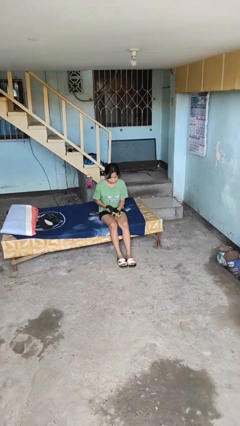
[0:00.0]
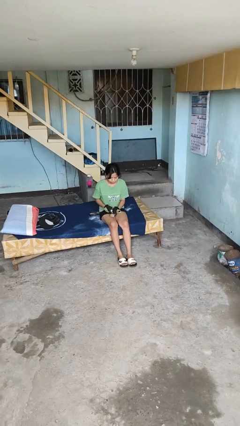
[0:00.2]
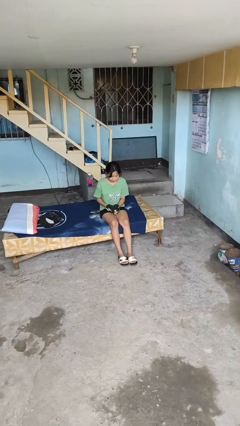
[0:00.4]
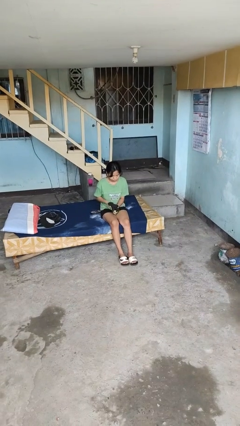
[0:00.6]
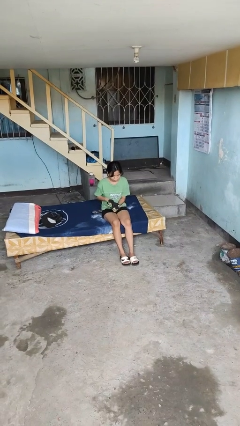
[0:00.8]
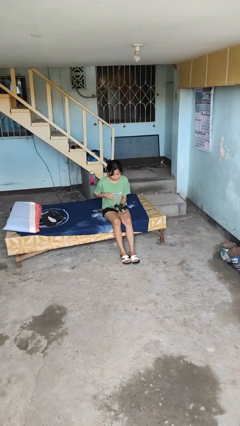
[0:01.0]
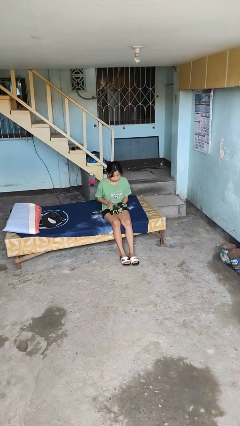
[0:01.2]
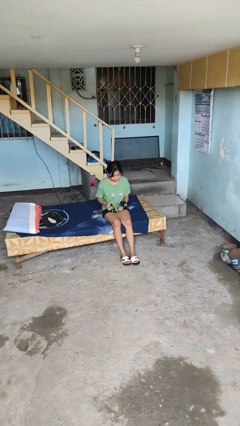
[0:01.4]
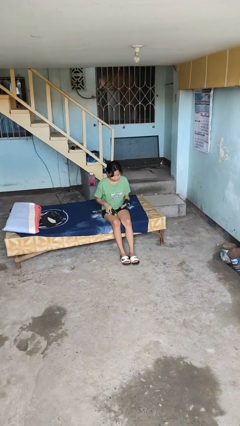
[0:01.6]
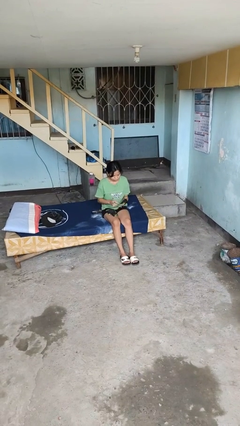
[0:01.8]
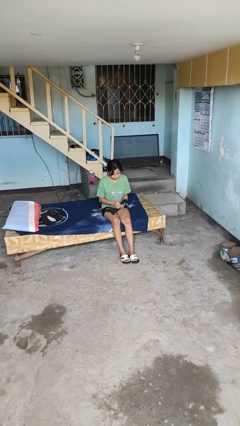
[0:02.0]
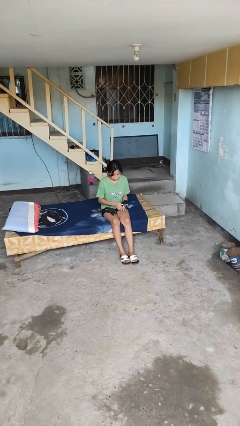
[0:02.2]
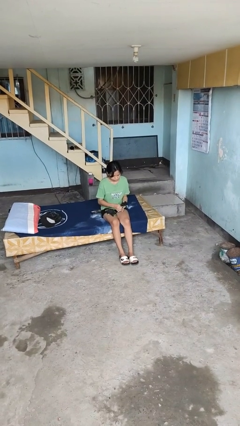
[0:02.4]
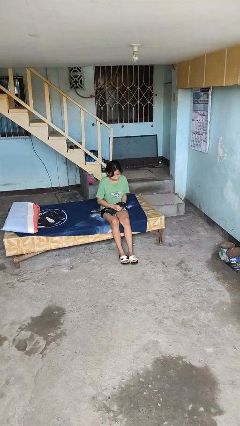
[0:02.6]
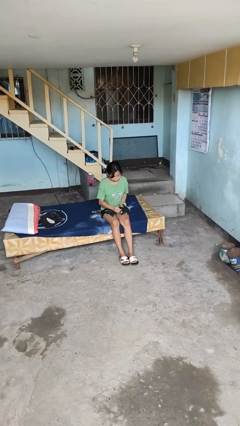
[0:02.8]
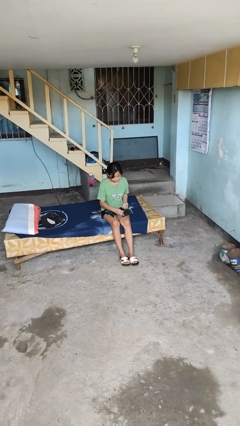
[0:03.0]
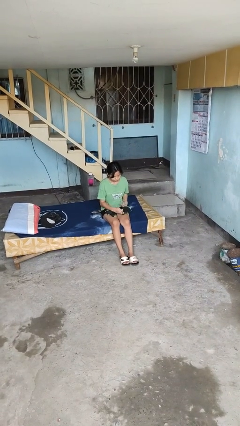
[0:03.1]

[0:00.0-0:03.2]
person takes off gloves

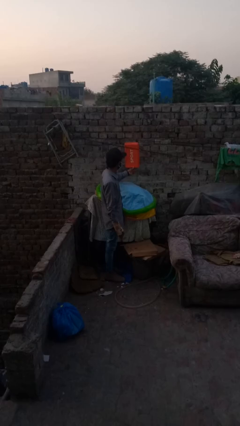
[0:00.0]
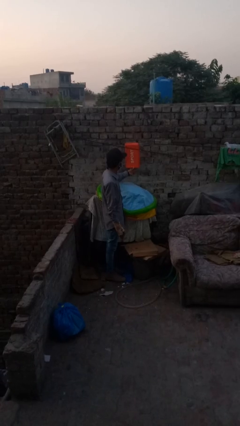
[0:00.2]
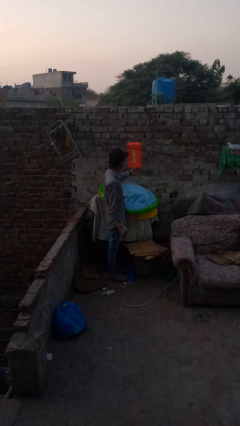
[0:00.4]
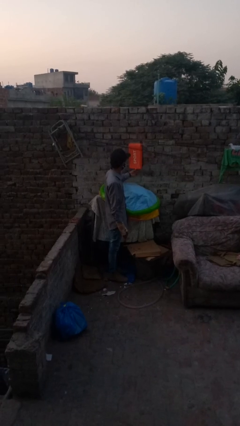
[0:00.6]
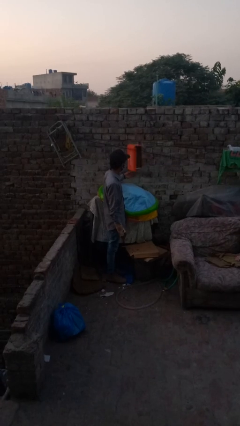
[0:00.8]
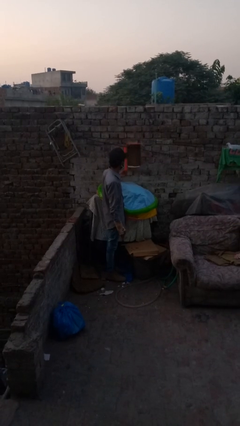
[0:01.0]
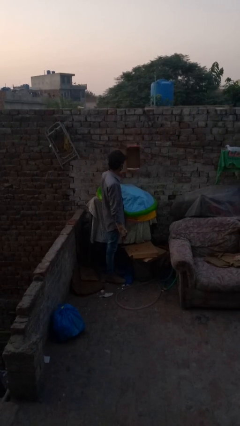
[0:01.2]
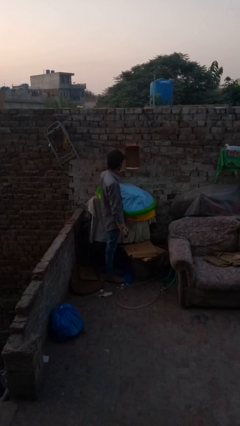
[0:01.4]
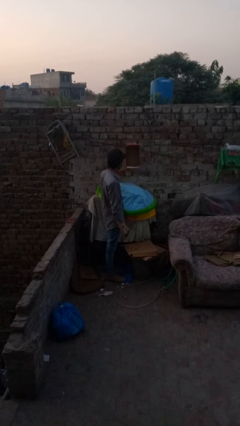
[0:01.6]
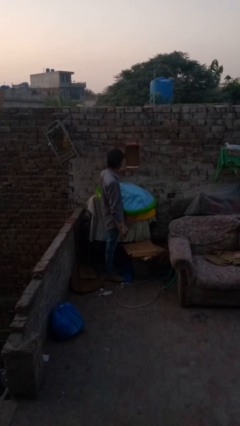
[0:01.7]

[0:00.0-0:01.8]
person opens mailbox

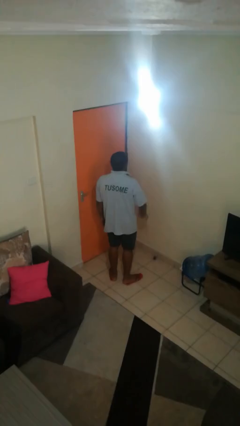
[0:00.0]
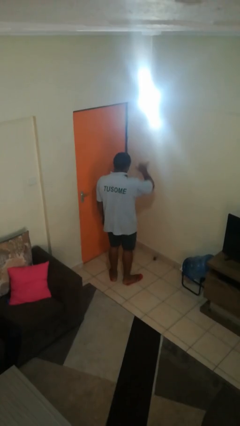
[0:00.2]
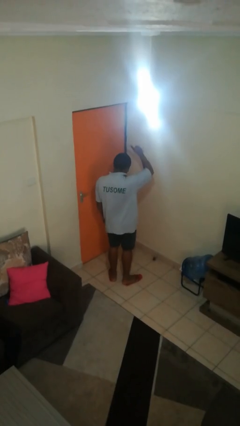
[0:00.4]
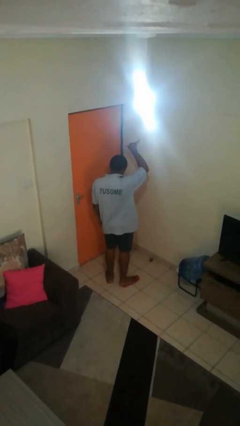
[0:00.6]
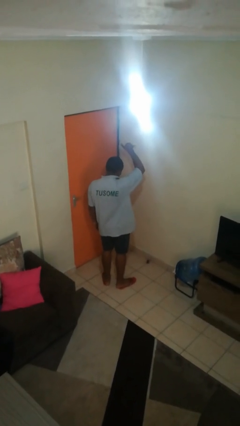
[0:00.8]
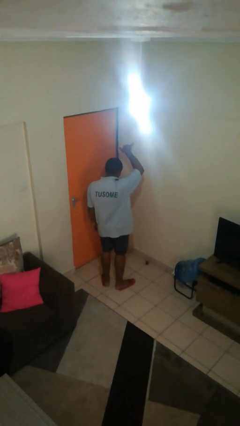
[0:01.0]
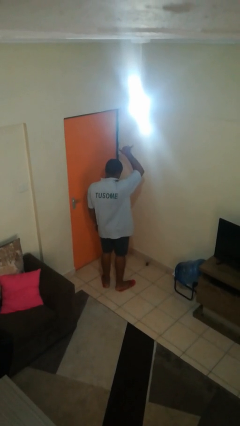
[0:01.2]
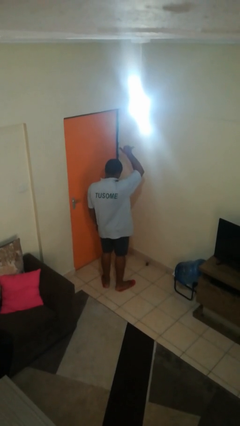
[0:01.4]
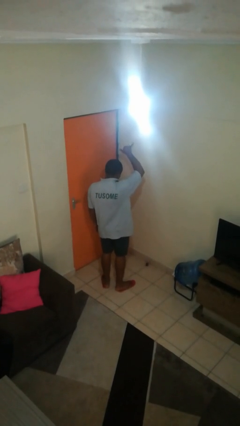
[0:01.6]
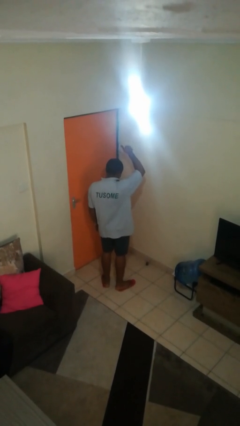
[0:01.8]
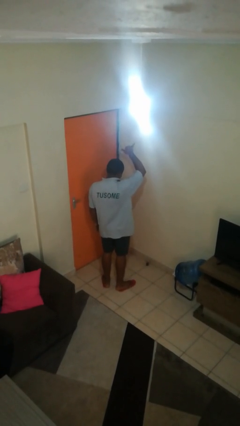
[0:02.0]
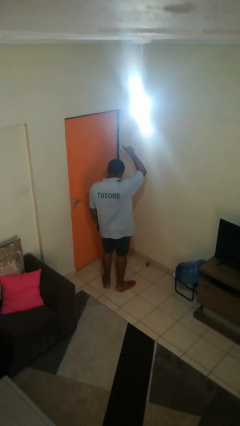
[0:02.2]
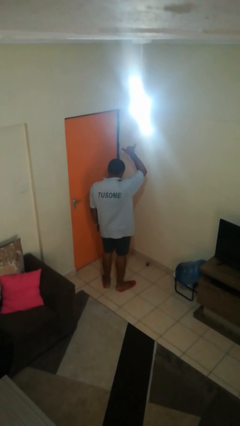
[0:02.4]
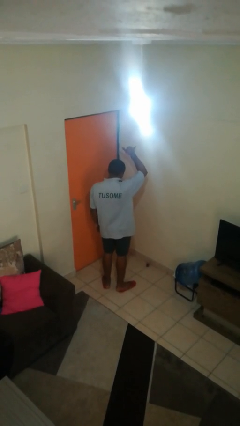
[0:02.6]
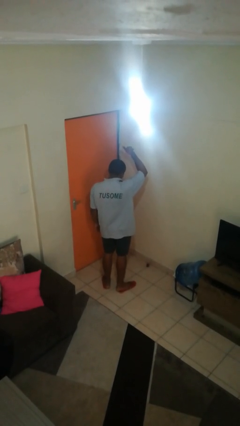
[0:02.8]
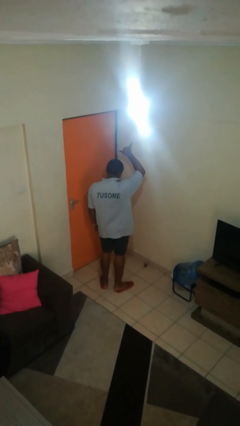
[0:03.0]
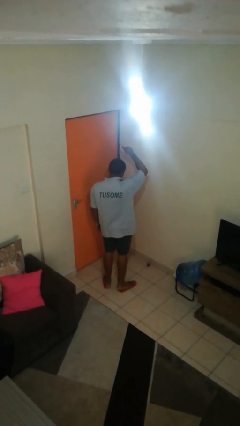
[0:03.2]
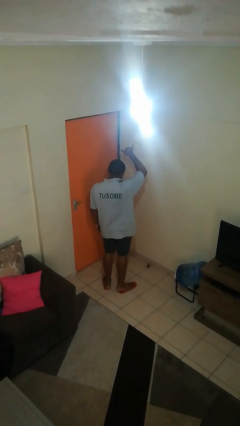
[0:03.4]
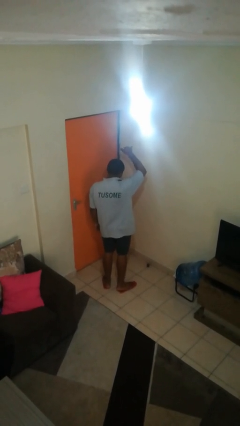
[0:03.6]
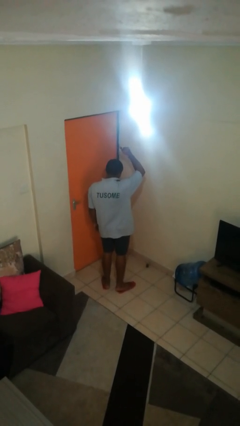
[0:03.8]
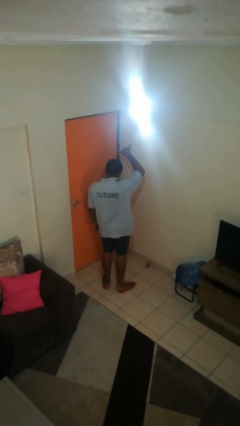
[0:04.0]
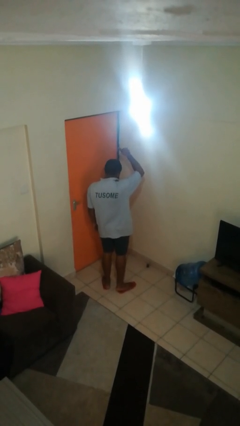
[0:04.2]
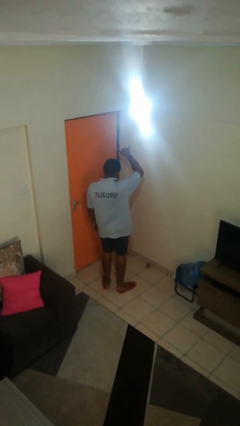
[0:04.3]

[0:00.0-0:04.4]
person gestures hang loose

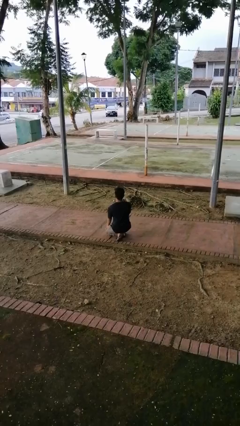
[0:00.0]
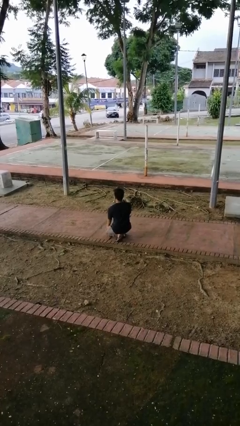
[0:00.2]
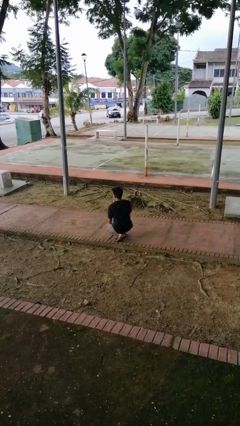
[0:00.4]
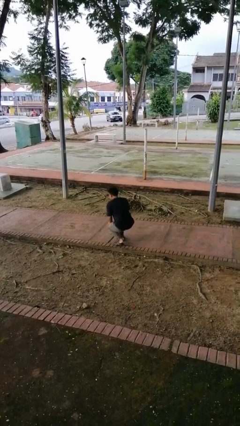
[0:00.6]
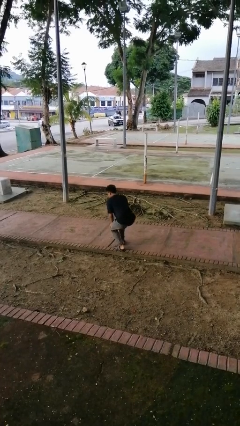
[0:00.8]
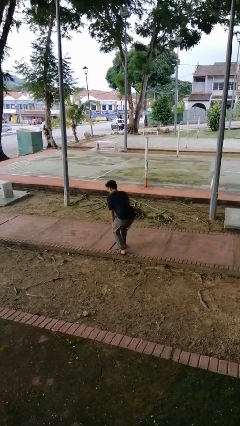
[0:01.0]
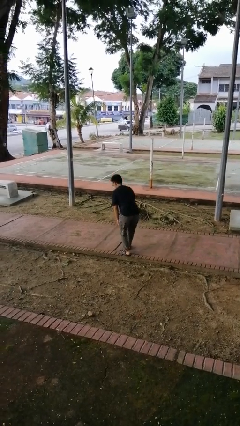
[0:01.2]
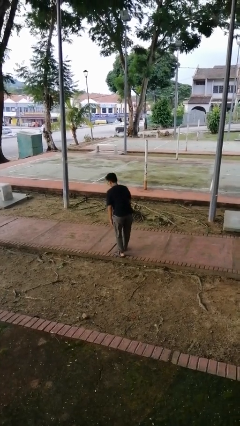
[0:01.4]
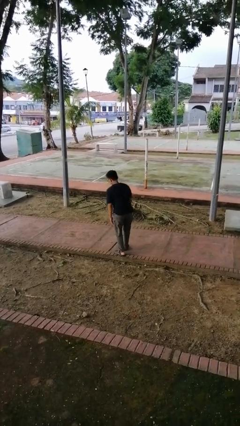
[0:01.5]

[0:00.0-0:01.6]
person stands up from floor

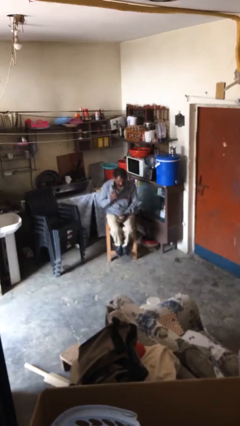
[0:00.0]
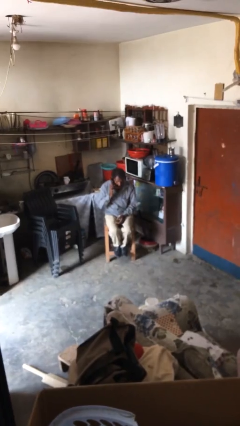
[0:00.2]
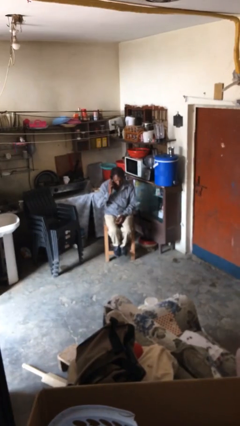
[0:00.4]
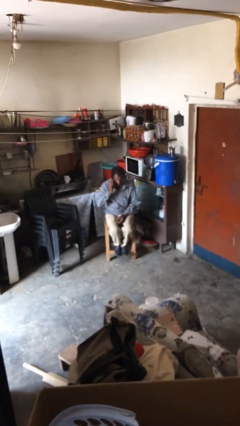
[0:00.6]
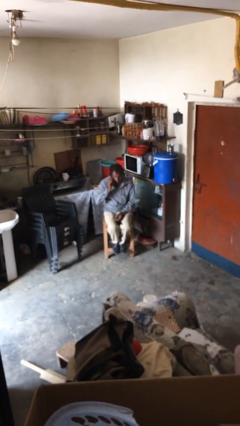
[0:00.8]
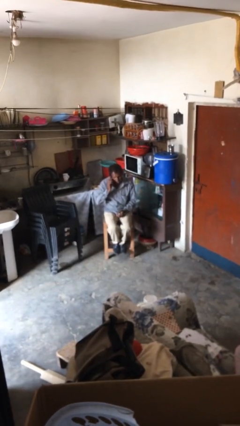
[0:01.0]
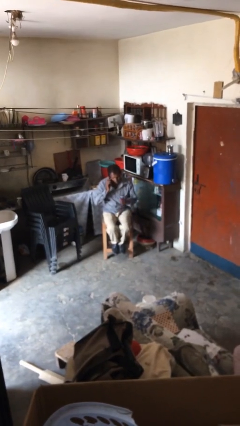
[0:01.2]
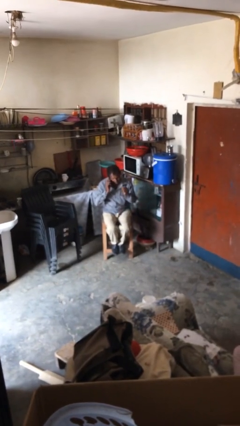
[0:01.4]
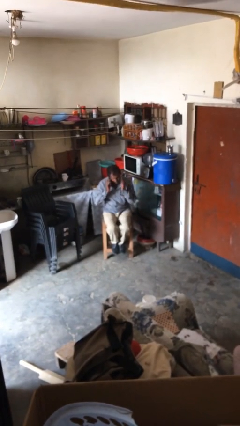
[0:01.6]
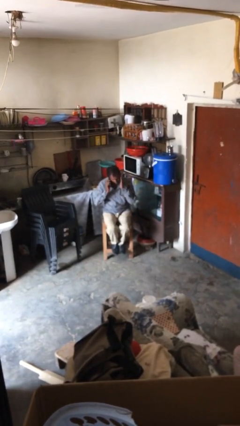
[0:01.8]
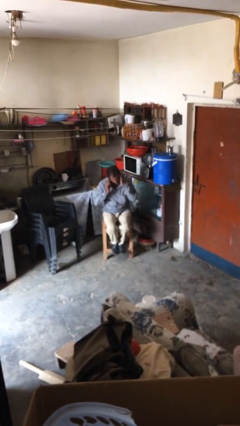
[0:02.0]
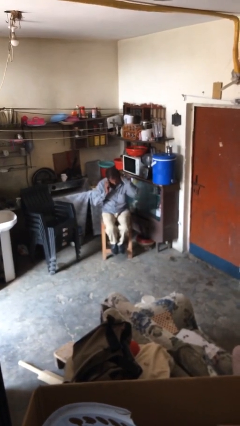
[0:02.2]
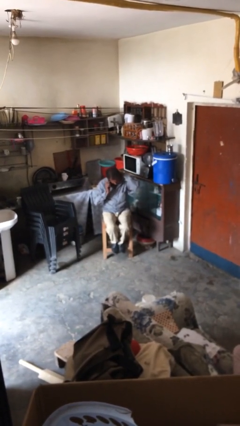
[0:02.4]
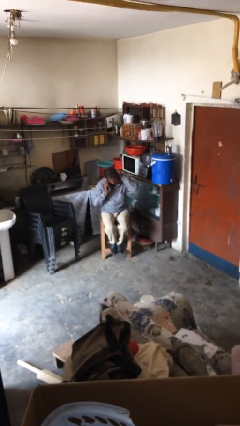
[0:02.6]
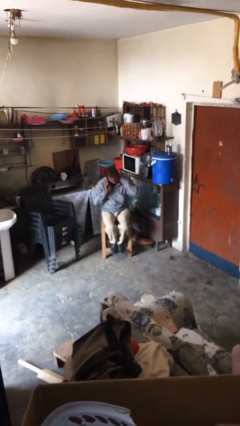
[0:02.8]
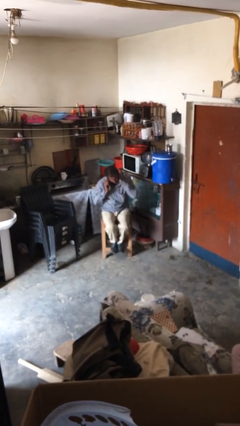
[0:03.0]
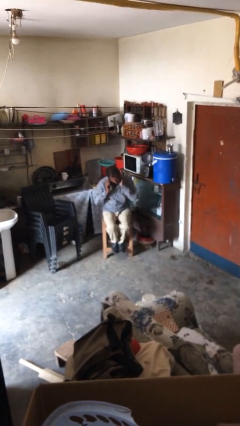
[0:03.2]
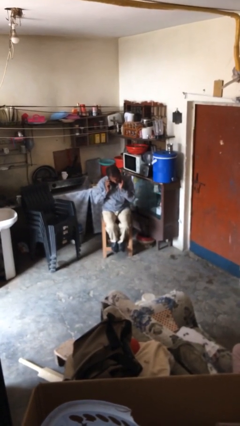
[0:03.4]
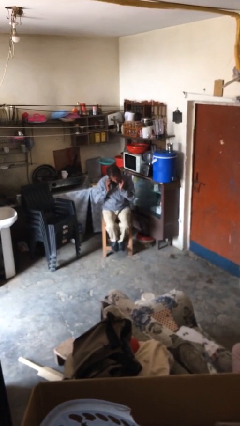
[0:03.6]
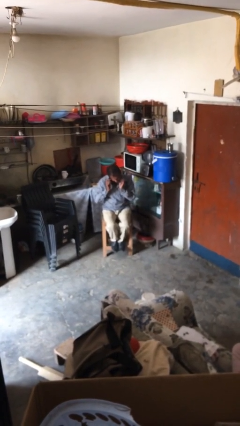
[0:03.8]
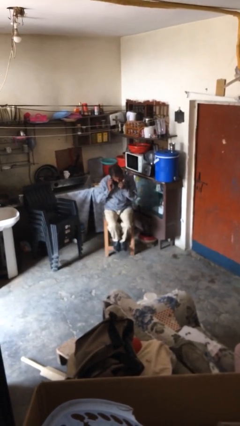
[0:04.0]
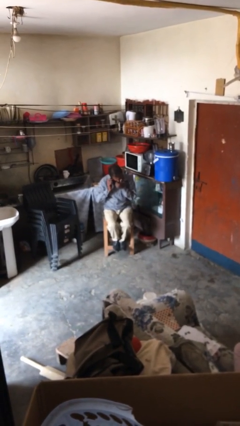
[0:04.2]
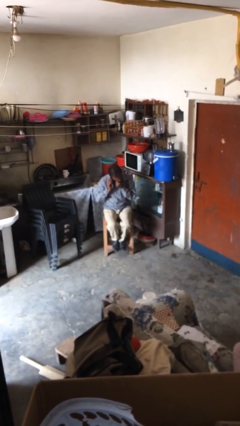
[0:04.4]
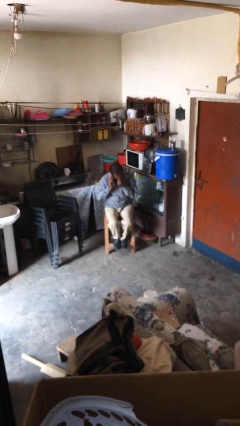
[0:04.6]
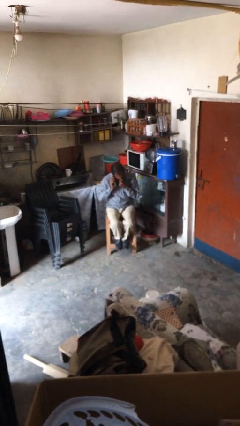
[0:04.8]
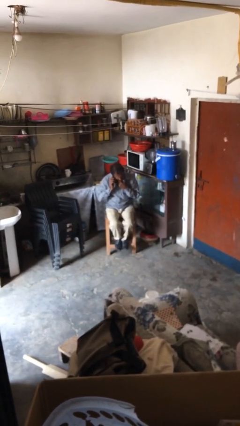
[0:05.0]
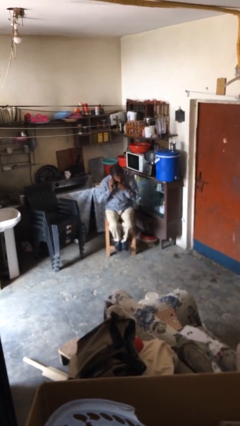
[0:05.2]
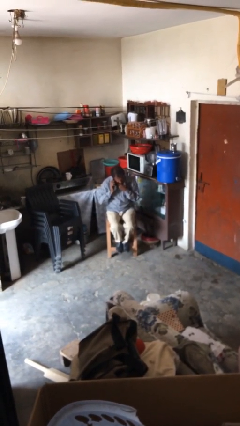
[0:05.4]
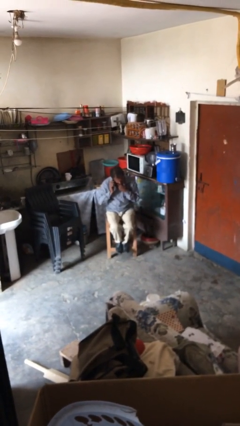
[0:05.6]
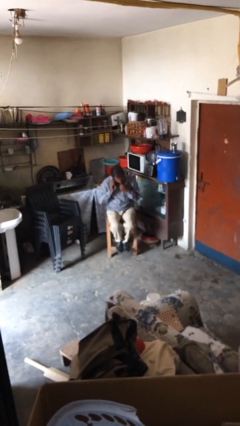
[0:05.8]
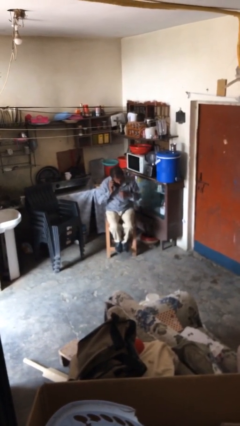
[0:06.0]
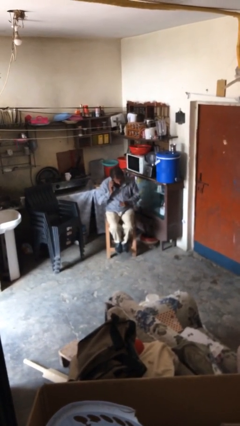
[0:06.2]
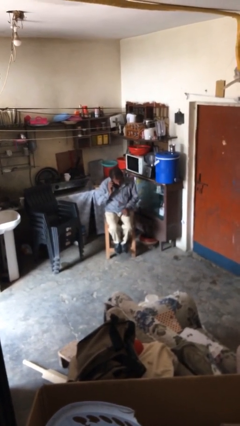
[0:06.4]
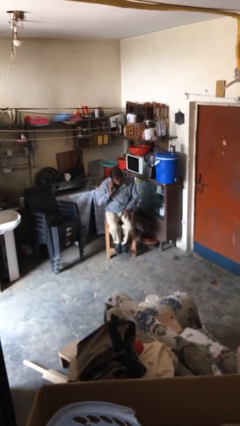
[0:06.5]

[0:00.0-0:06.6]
person talks on phone
